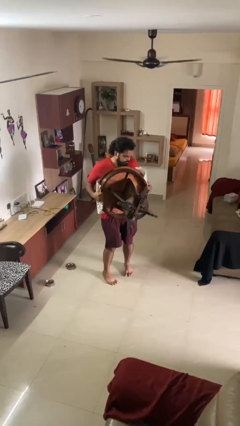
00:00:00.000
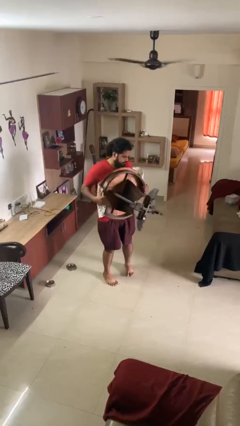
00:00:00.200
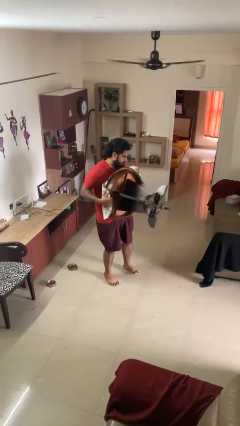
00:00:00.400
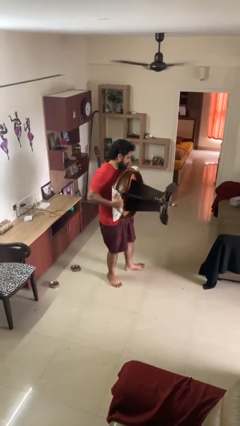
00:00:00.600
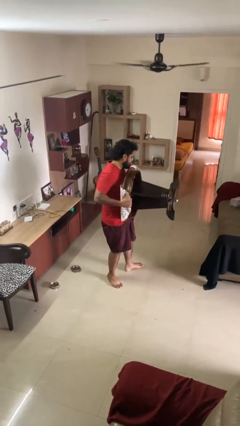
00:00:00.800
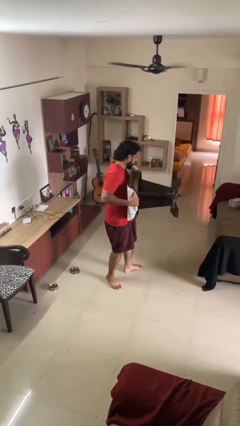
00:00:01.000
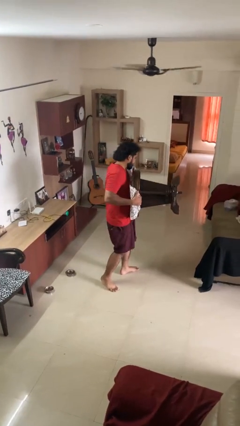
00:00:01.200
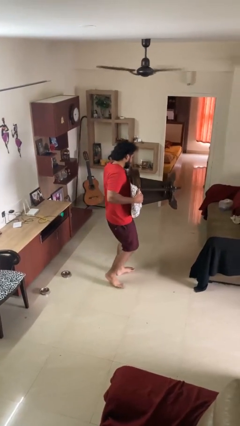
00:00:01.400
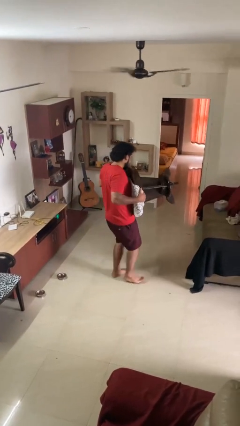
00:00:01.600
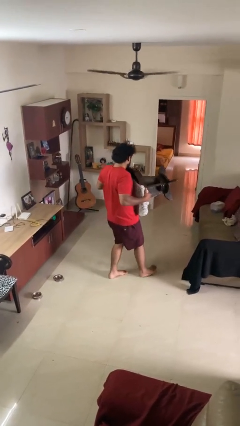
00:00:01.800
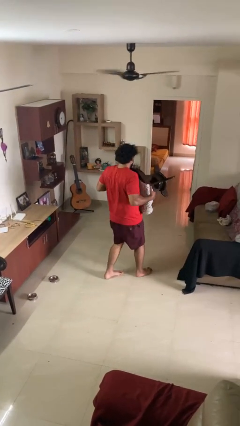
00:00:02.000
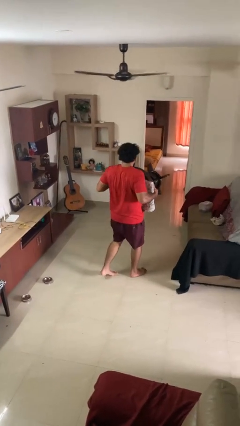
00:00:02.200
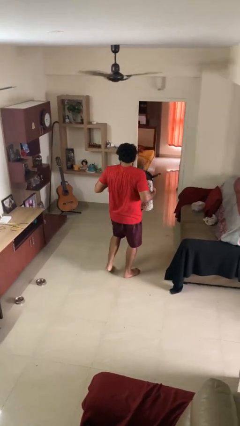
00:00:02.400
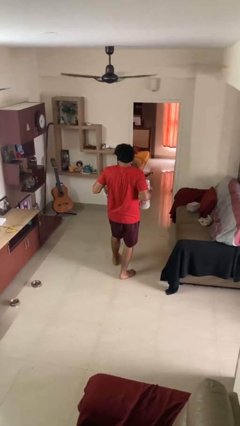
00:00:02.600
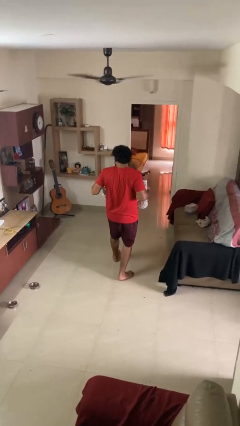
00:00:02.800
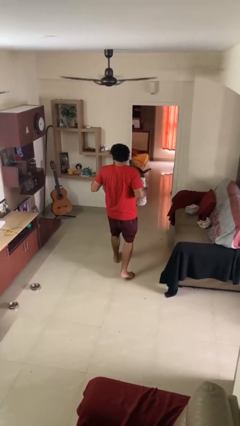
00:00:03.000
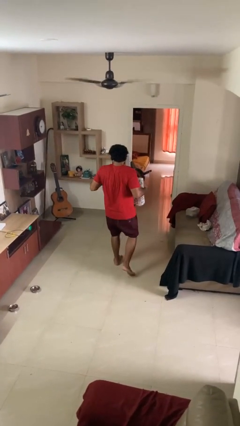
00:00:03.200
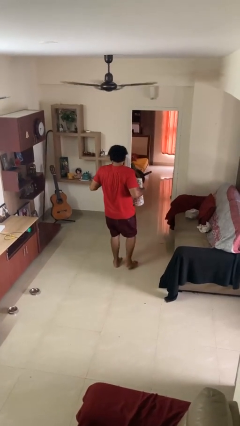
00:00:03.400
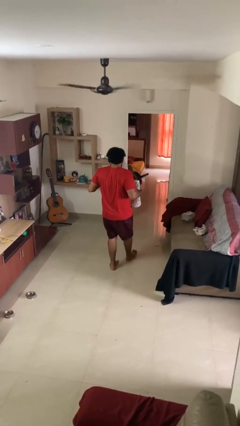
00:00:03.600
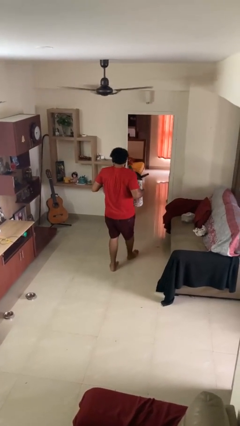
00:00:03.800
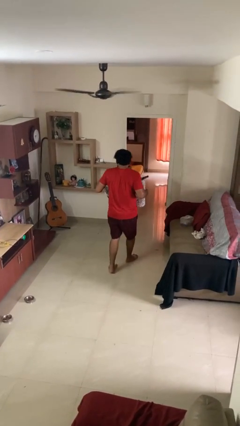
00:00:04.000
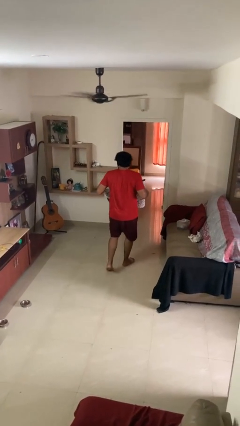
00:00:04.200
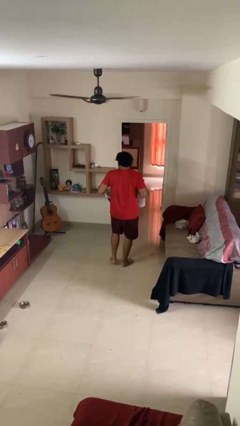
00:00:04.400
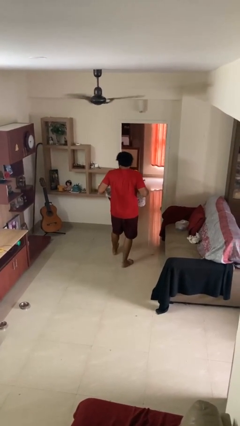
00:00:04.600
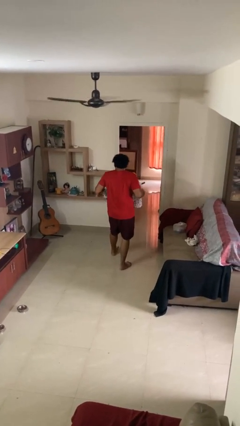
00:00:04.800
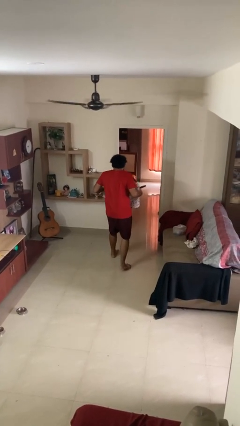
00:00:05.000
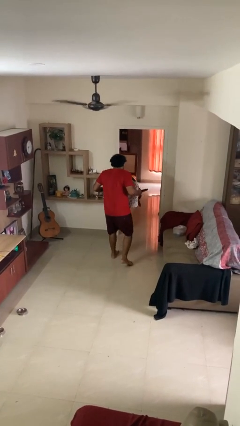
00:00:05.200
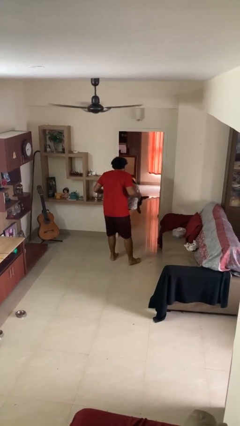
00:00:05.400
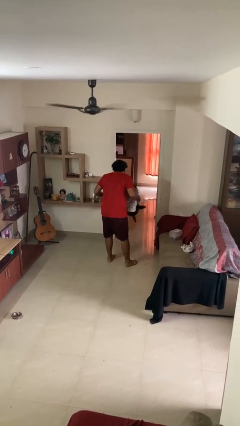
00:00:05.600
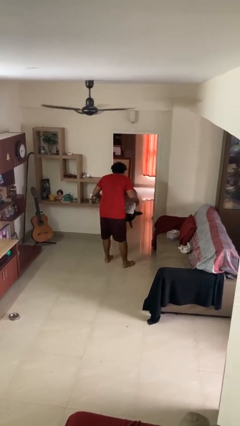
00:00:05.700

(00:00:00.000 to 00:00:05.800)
person carries heavy object

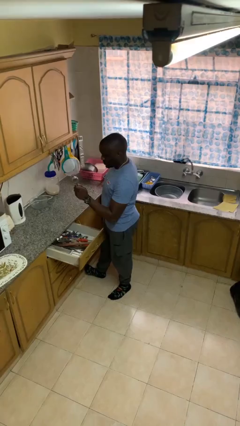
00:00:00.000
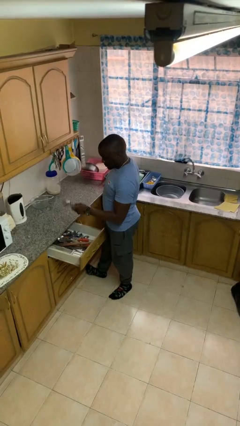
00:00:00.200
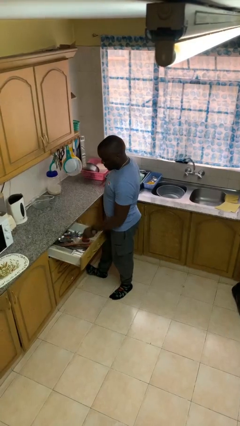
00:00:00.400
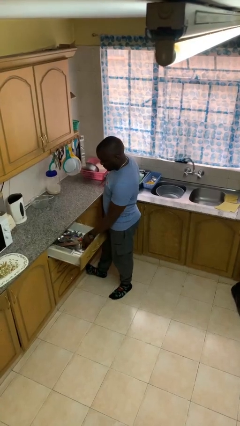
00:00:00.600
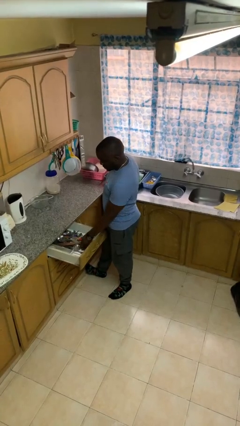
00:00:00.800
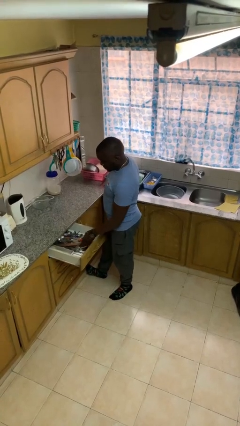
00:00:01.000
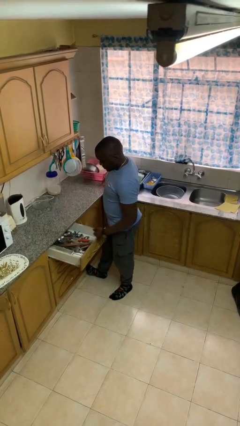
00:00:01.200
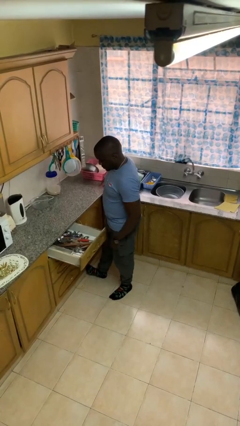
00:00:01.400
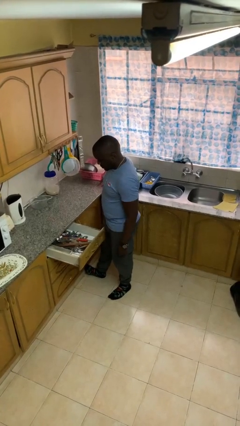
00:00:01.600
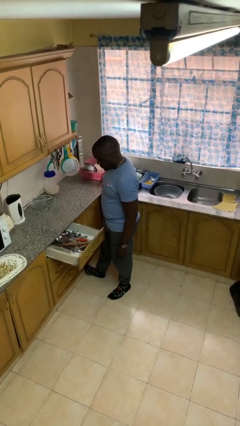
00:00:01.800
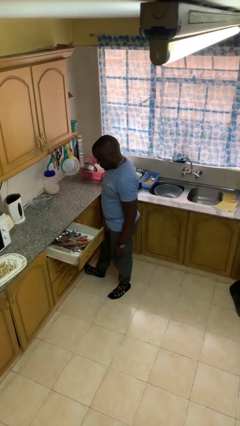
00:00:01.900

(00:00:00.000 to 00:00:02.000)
person puts object into kitchen drawer

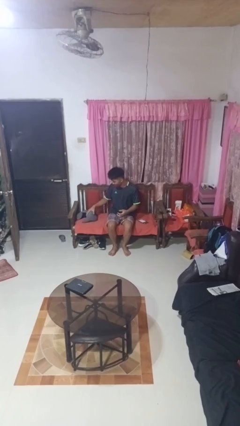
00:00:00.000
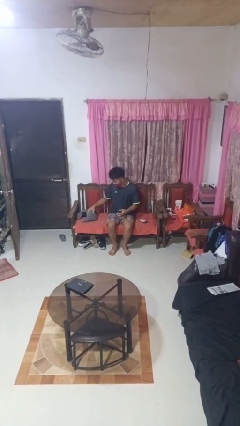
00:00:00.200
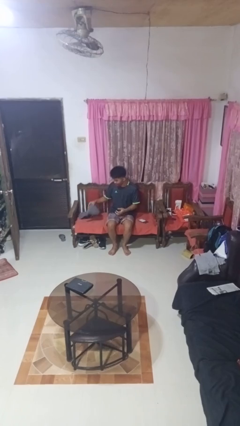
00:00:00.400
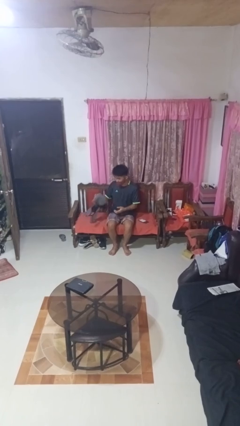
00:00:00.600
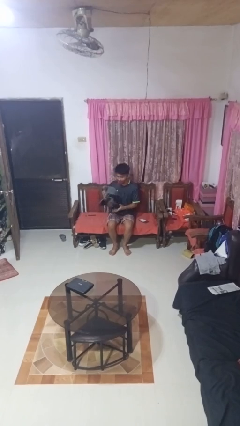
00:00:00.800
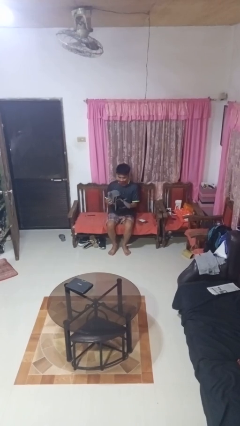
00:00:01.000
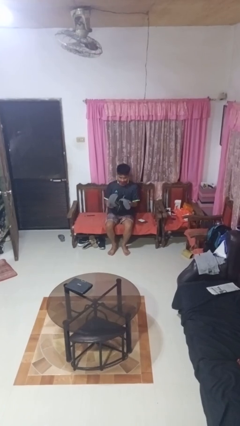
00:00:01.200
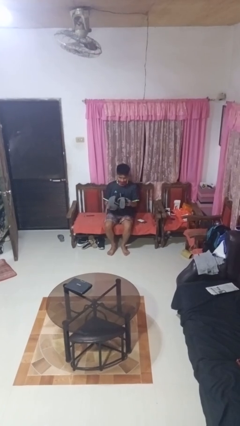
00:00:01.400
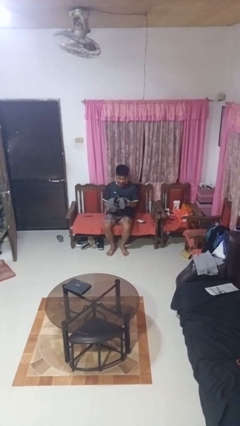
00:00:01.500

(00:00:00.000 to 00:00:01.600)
person picks up object from floor

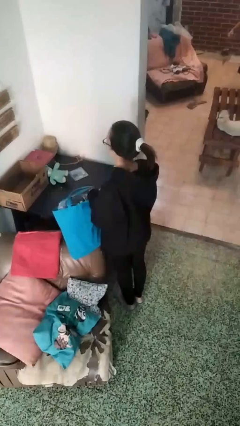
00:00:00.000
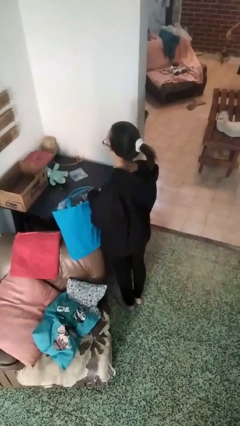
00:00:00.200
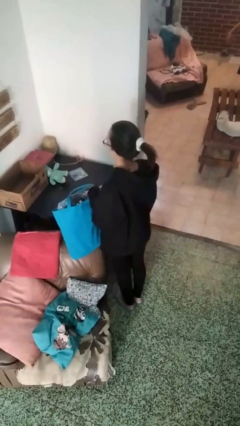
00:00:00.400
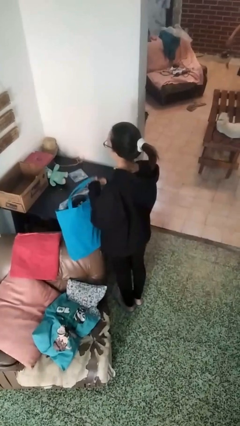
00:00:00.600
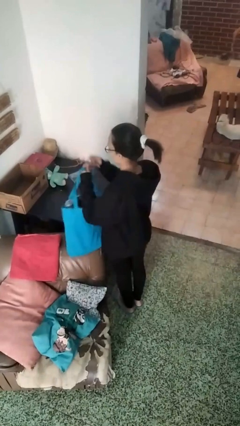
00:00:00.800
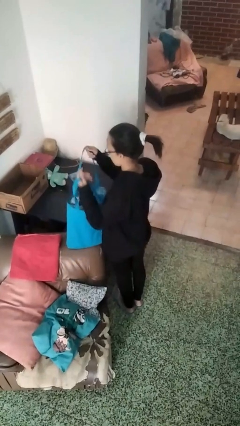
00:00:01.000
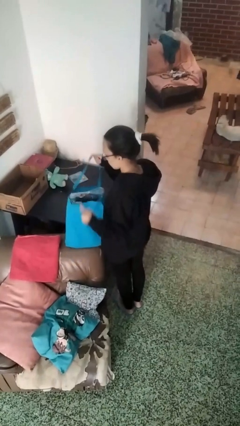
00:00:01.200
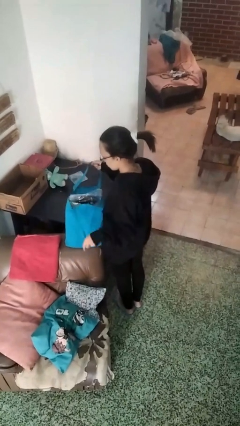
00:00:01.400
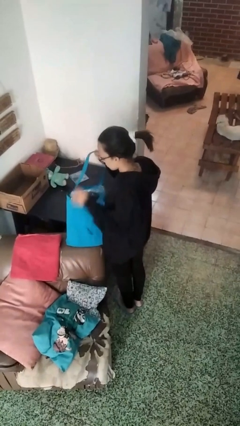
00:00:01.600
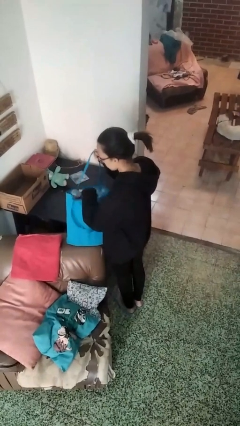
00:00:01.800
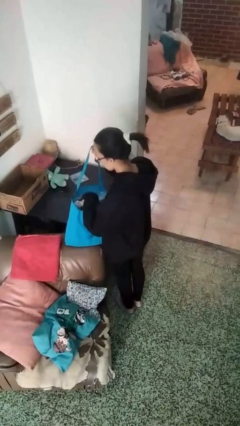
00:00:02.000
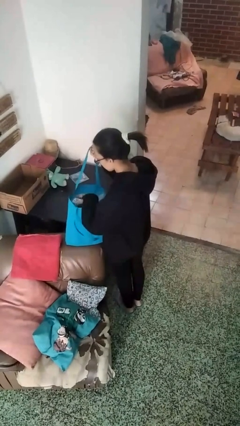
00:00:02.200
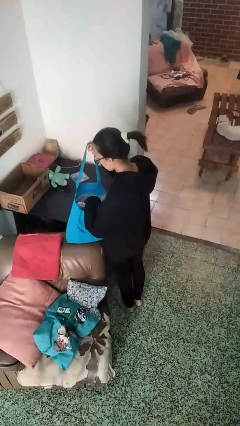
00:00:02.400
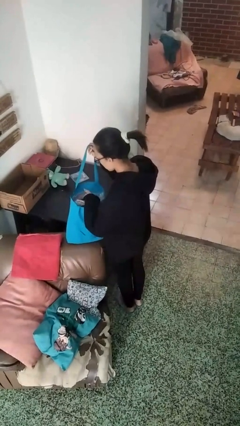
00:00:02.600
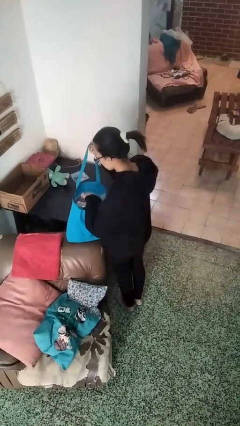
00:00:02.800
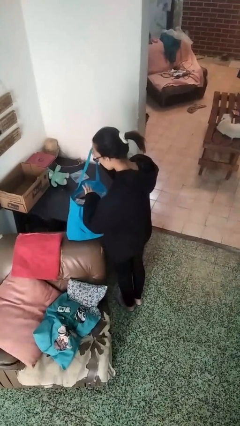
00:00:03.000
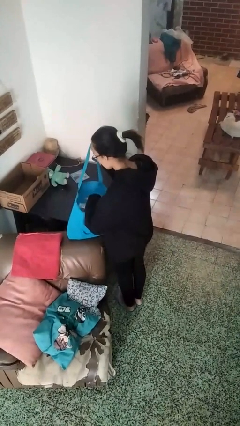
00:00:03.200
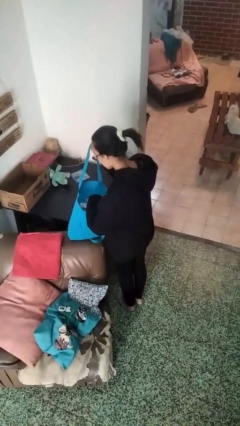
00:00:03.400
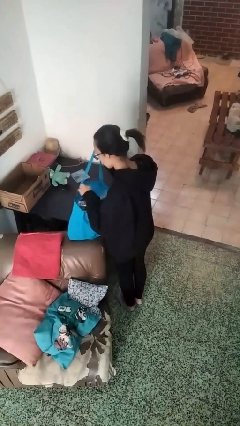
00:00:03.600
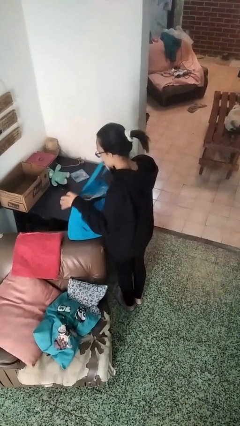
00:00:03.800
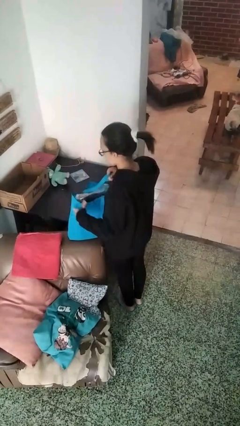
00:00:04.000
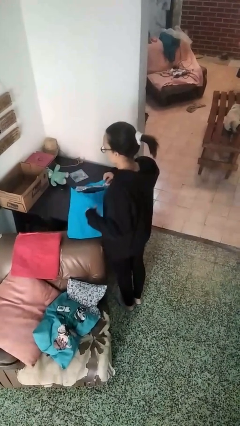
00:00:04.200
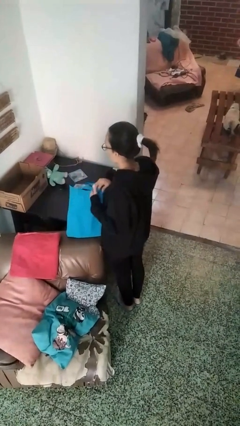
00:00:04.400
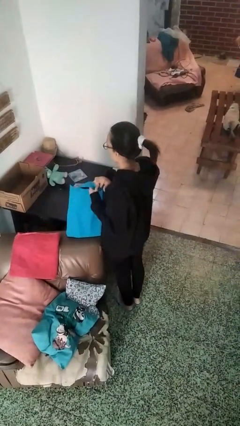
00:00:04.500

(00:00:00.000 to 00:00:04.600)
person searches in bag

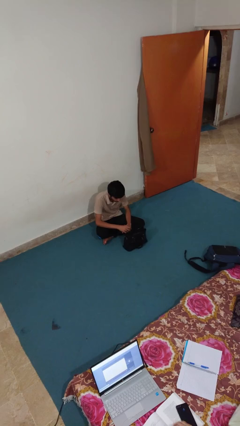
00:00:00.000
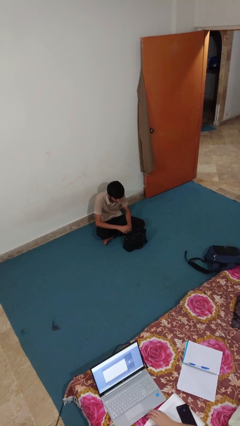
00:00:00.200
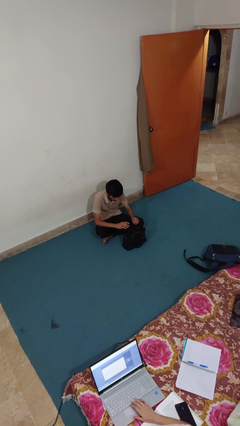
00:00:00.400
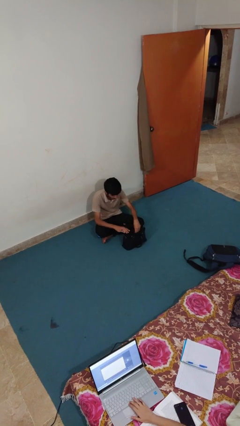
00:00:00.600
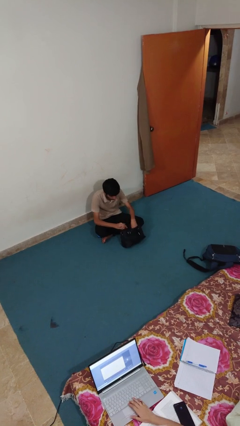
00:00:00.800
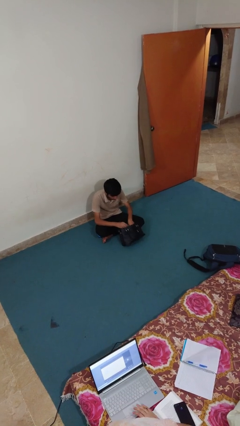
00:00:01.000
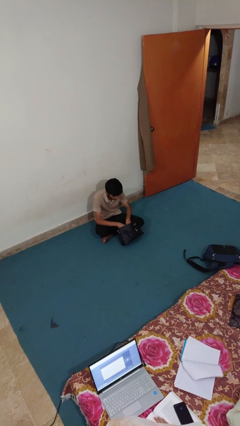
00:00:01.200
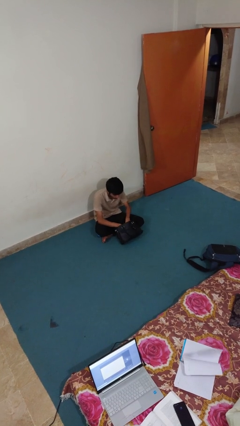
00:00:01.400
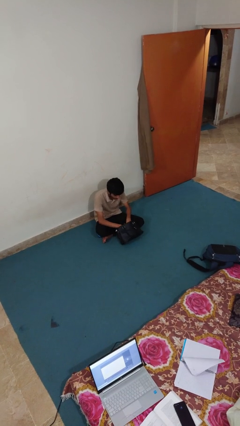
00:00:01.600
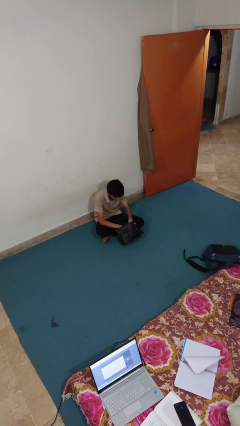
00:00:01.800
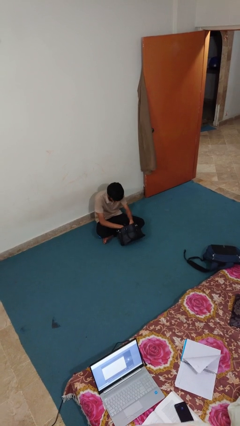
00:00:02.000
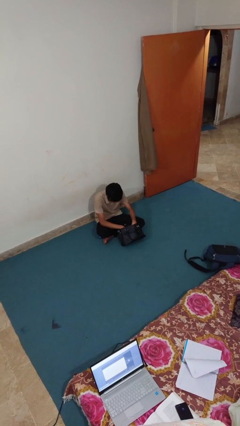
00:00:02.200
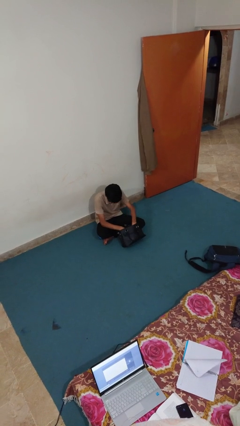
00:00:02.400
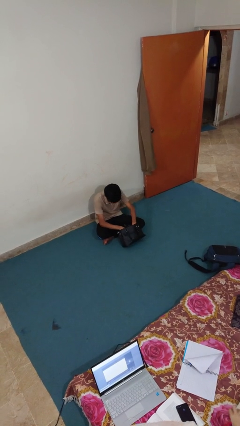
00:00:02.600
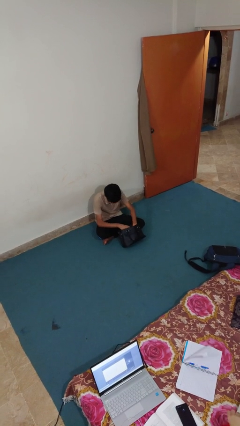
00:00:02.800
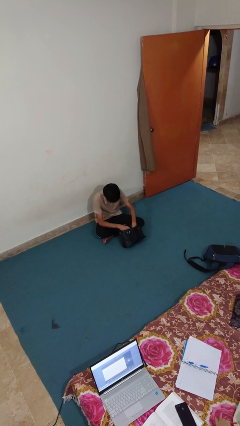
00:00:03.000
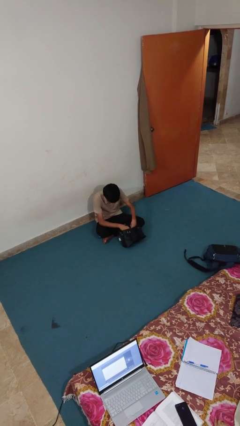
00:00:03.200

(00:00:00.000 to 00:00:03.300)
person searches in purse

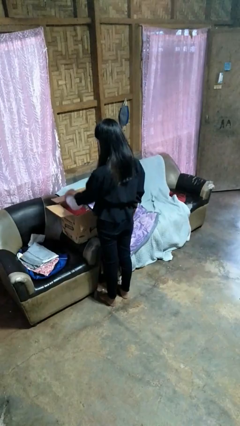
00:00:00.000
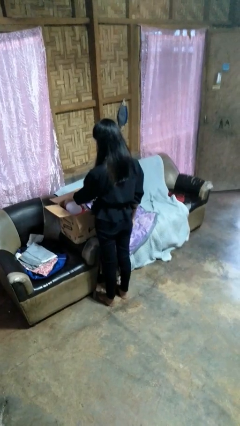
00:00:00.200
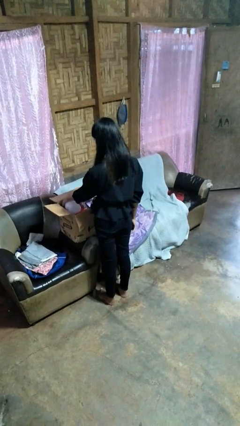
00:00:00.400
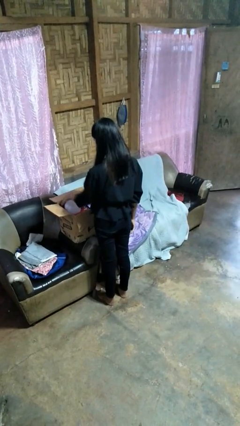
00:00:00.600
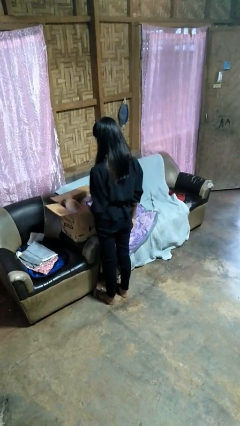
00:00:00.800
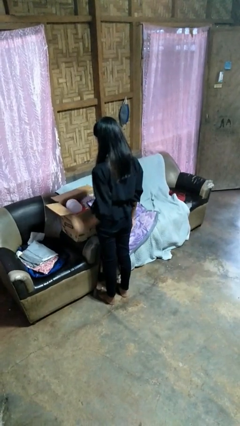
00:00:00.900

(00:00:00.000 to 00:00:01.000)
person puts object into box
